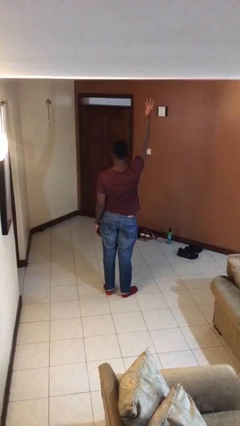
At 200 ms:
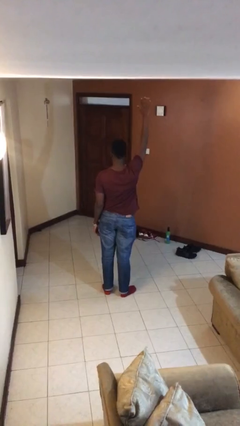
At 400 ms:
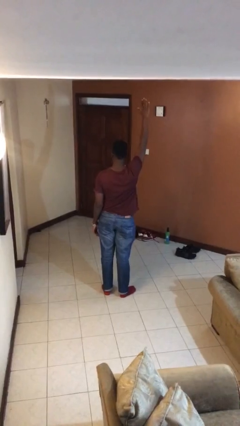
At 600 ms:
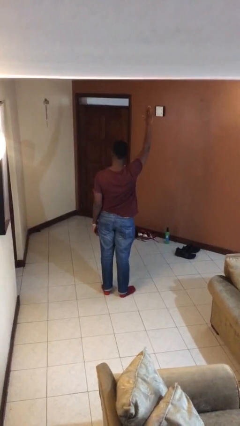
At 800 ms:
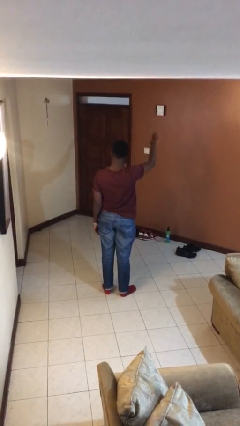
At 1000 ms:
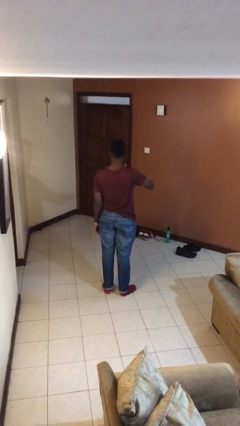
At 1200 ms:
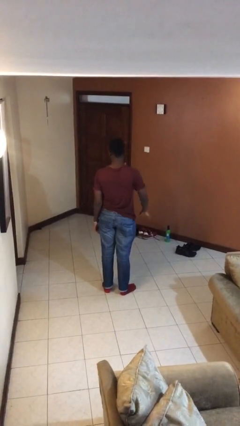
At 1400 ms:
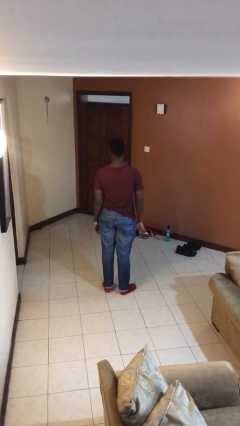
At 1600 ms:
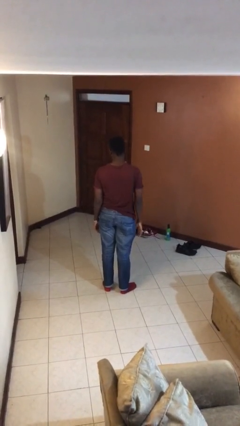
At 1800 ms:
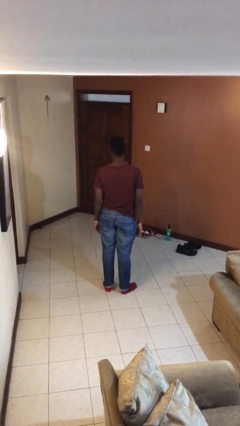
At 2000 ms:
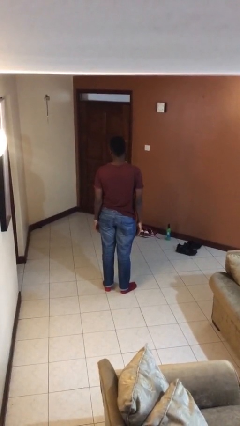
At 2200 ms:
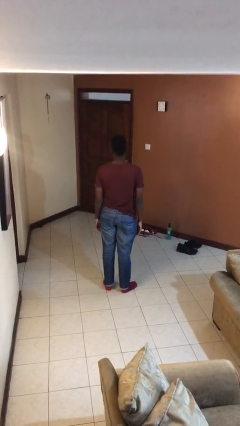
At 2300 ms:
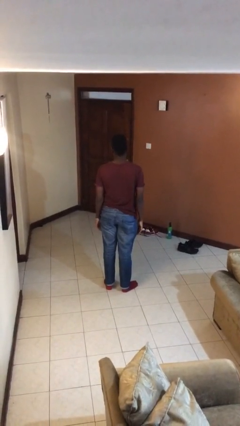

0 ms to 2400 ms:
person gestures swipe down

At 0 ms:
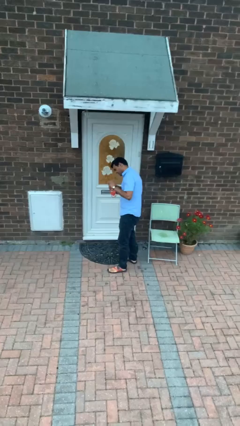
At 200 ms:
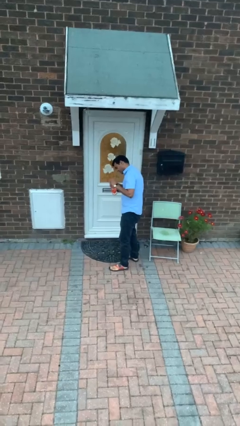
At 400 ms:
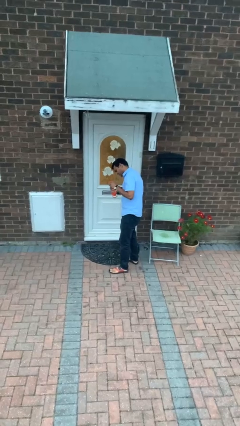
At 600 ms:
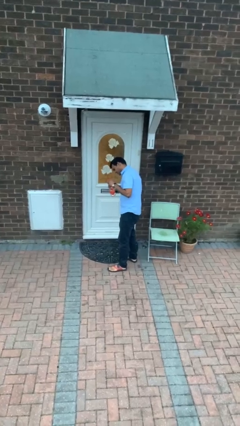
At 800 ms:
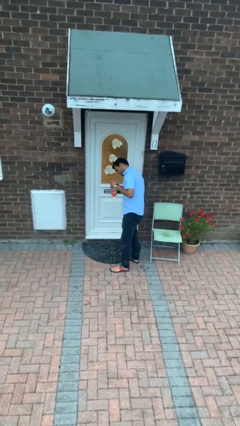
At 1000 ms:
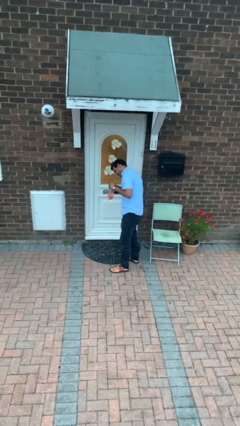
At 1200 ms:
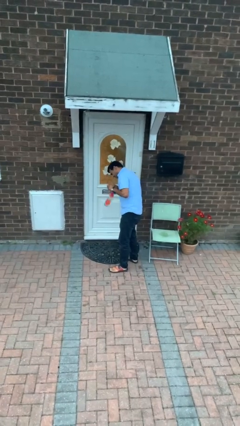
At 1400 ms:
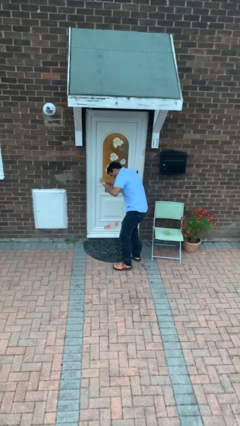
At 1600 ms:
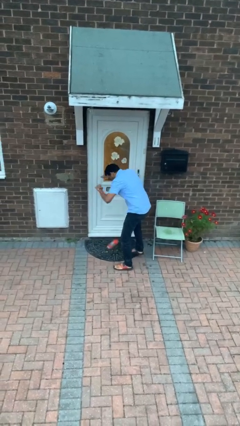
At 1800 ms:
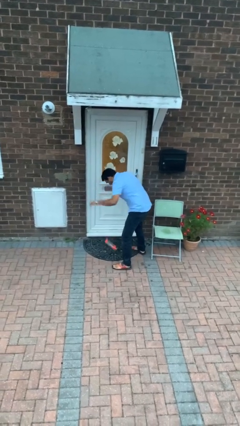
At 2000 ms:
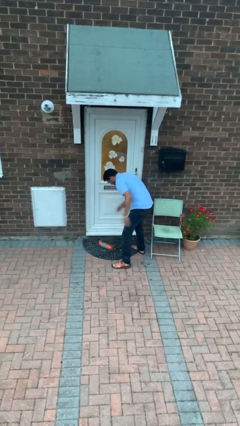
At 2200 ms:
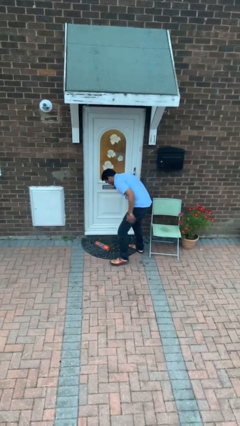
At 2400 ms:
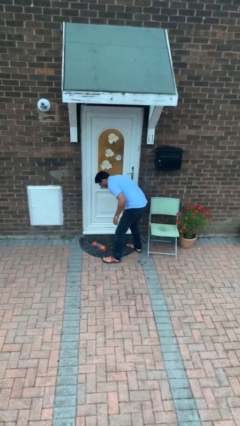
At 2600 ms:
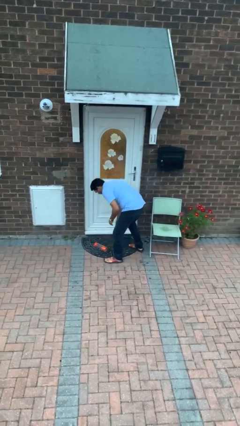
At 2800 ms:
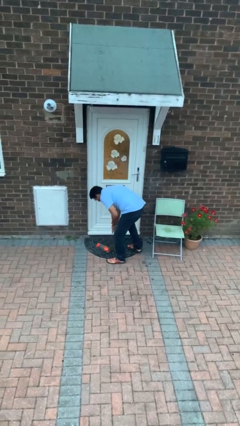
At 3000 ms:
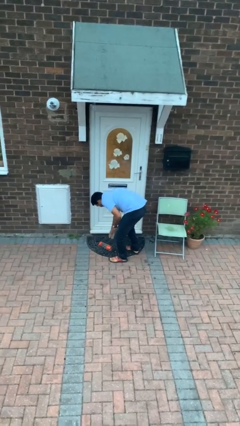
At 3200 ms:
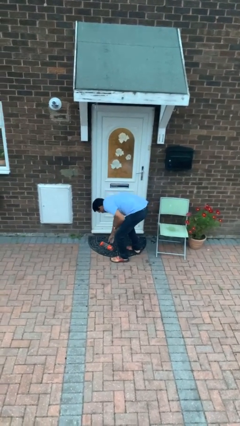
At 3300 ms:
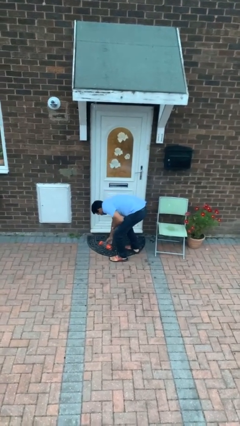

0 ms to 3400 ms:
person drops object

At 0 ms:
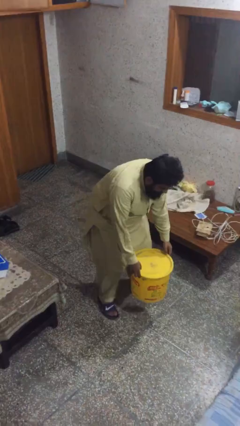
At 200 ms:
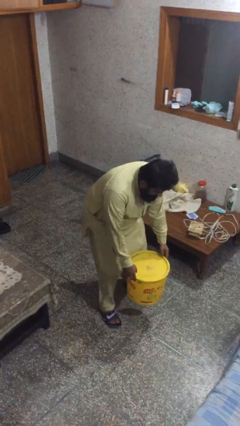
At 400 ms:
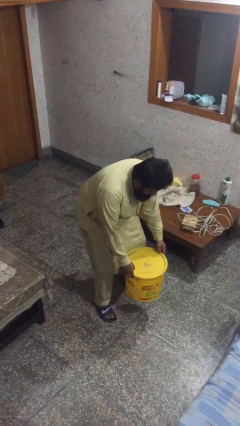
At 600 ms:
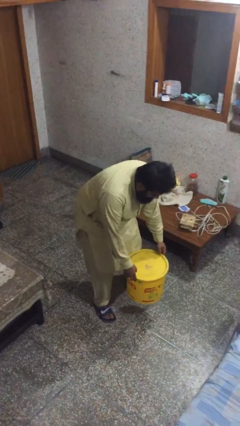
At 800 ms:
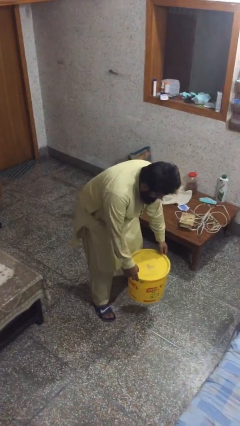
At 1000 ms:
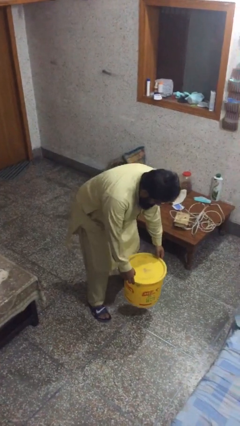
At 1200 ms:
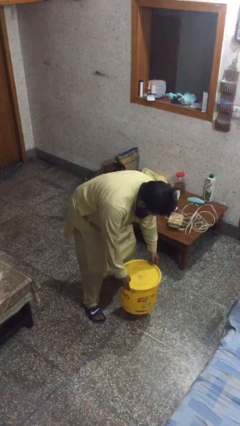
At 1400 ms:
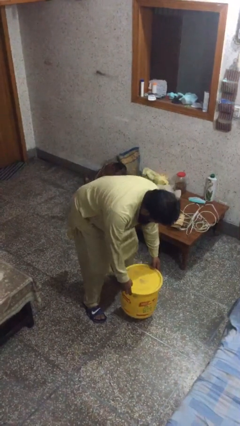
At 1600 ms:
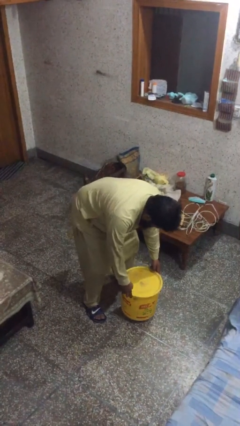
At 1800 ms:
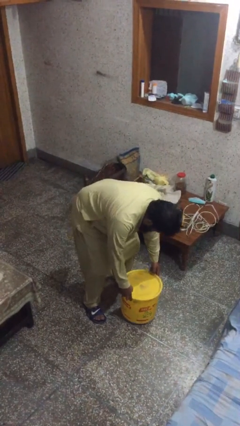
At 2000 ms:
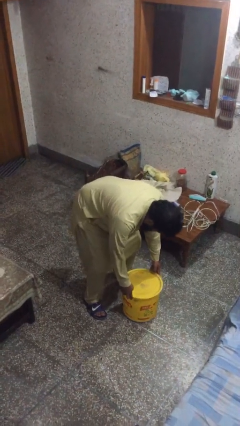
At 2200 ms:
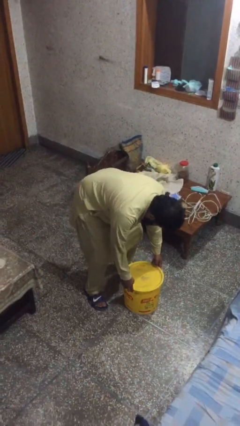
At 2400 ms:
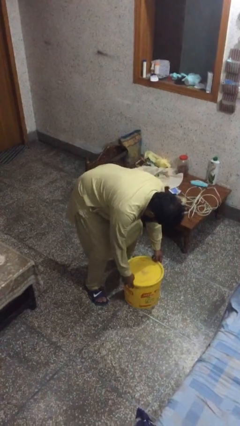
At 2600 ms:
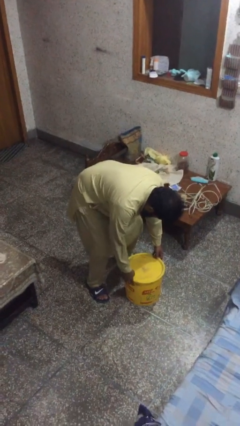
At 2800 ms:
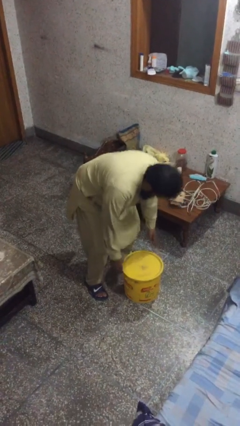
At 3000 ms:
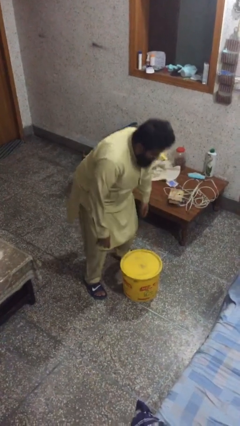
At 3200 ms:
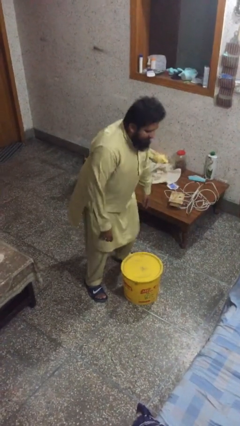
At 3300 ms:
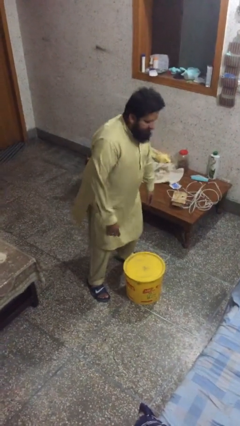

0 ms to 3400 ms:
person puts down object on floor

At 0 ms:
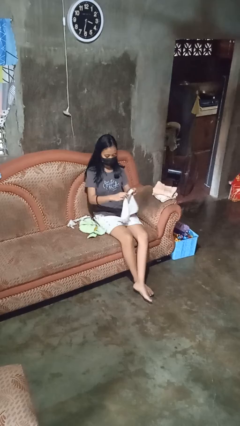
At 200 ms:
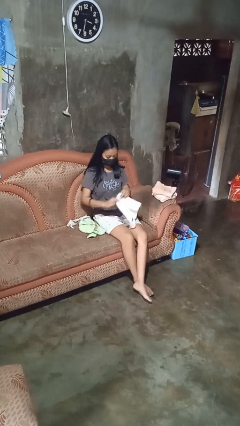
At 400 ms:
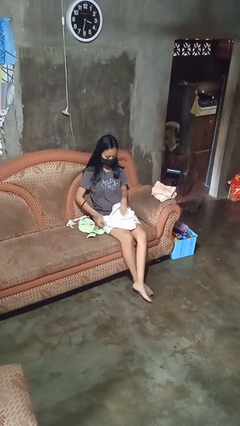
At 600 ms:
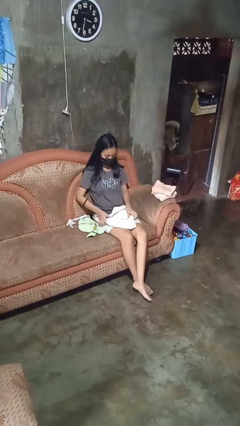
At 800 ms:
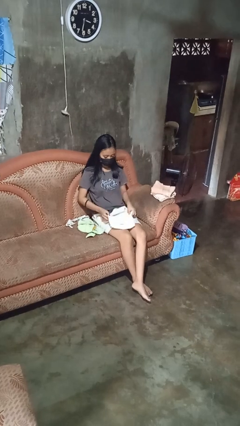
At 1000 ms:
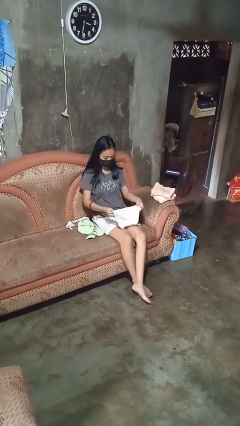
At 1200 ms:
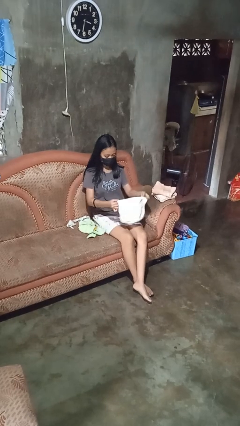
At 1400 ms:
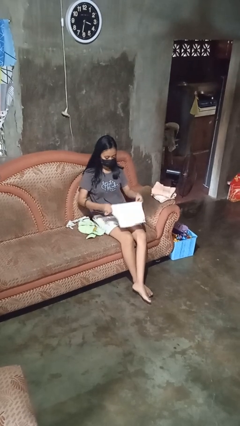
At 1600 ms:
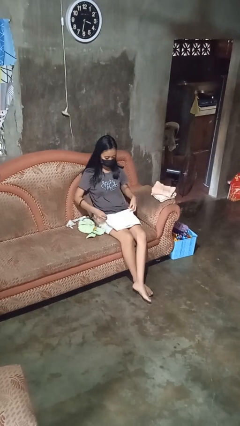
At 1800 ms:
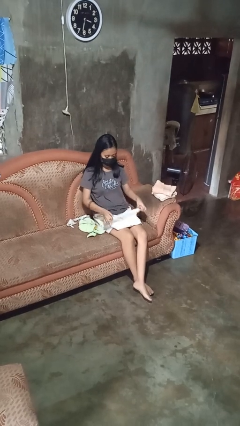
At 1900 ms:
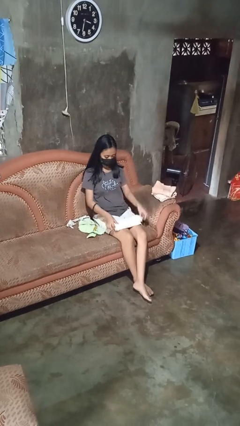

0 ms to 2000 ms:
person folds towel

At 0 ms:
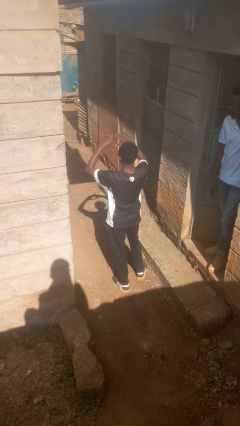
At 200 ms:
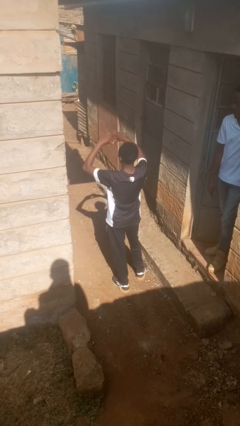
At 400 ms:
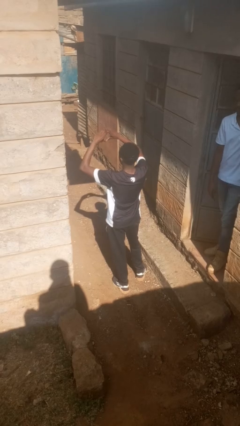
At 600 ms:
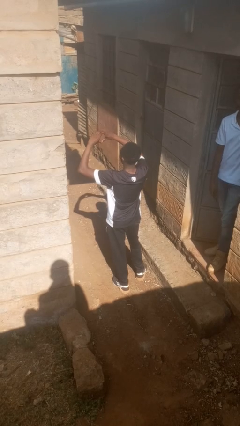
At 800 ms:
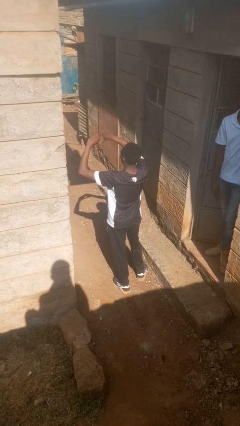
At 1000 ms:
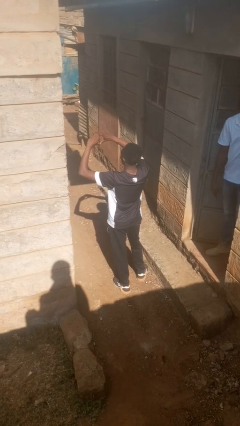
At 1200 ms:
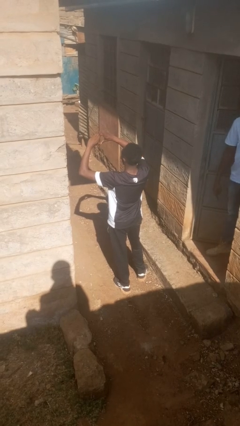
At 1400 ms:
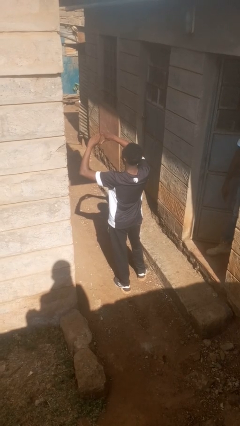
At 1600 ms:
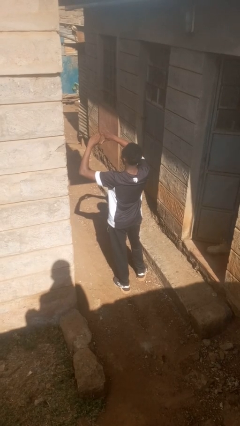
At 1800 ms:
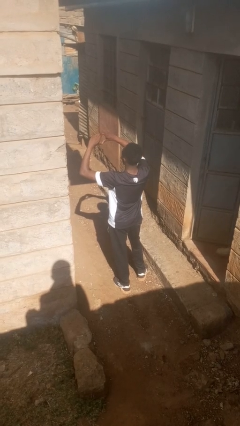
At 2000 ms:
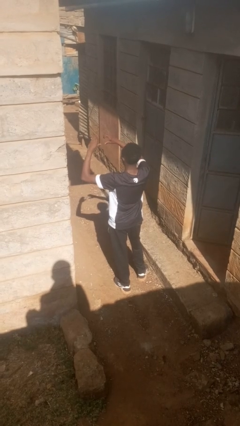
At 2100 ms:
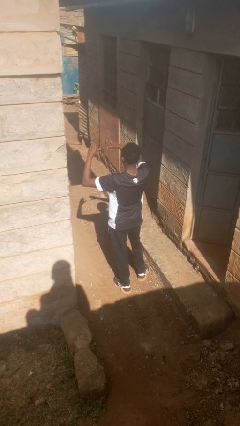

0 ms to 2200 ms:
person gestures heart

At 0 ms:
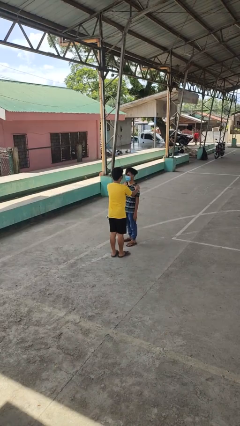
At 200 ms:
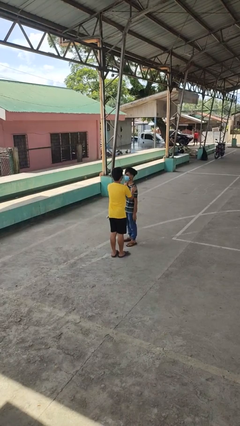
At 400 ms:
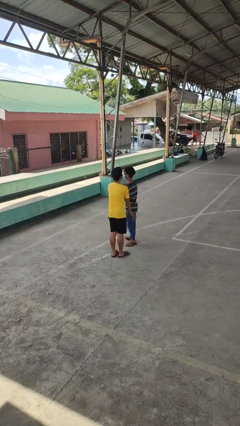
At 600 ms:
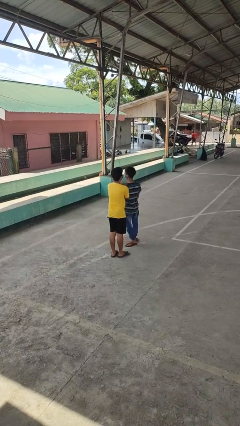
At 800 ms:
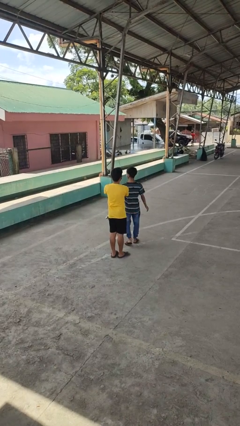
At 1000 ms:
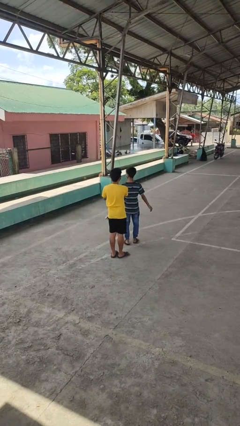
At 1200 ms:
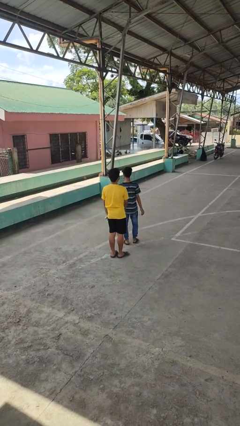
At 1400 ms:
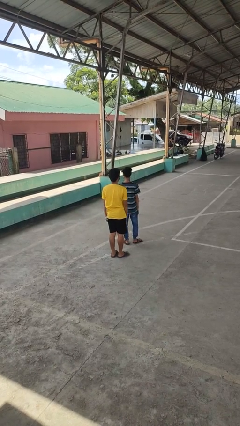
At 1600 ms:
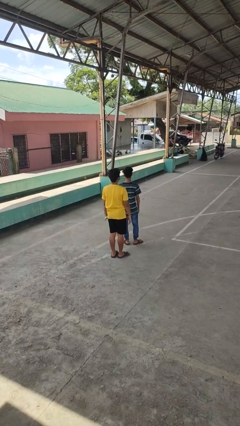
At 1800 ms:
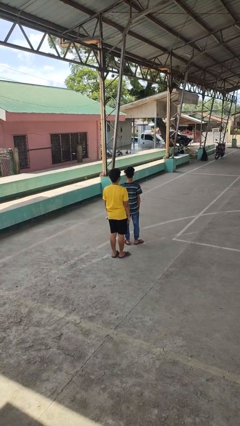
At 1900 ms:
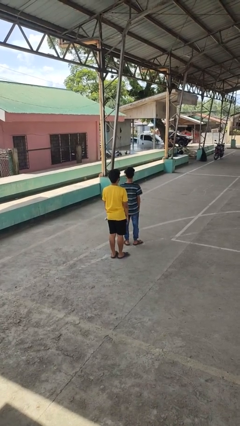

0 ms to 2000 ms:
person spins person around

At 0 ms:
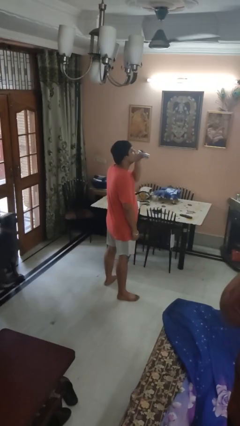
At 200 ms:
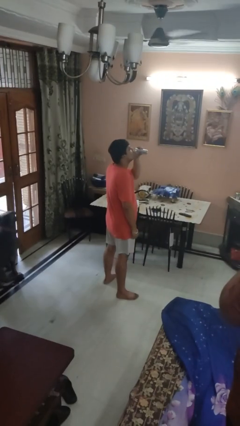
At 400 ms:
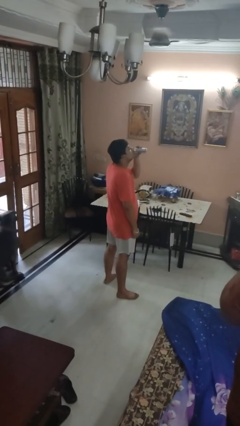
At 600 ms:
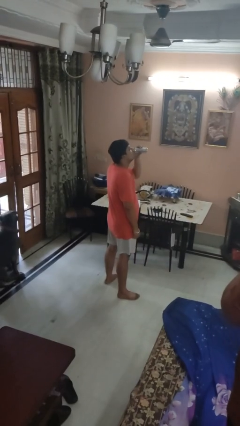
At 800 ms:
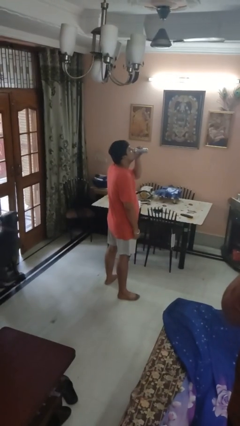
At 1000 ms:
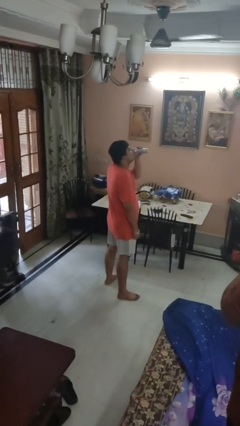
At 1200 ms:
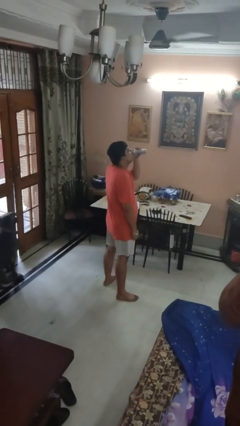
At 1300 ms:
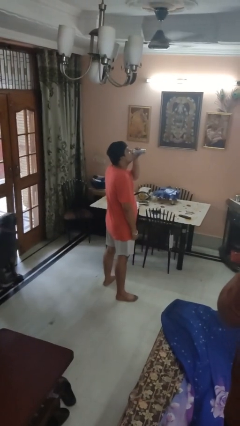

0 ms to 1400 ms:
person drinks from beverage can

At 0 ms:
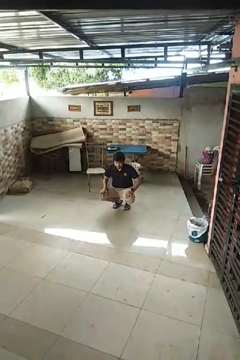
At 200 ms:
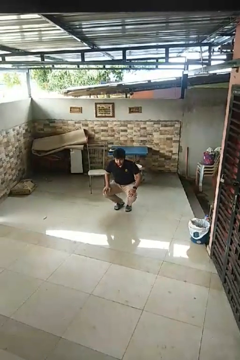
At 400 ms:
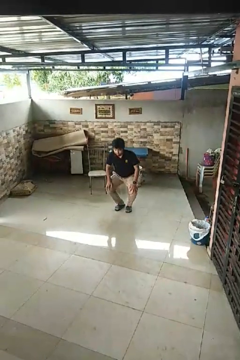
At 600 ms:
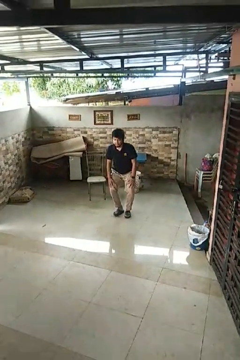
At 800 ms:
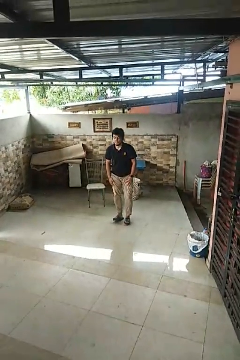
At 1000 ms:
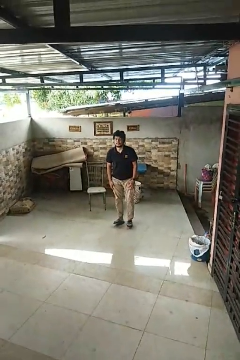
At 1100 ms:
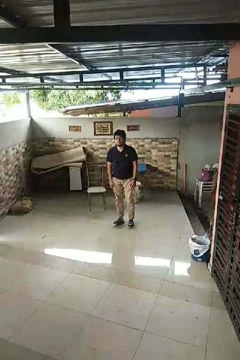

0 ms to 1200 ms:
person stands up
